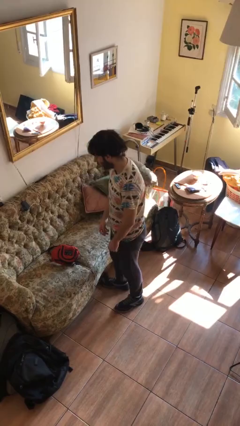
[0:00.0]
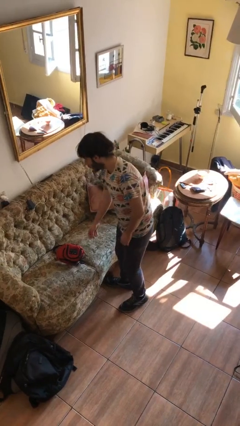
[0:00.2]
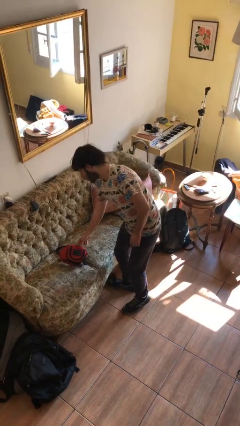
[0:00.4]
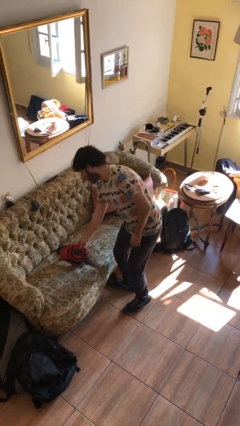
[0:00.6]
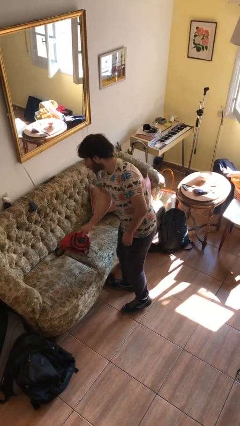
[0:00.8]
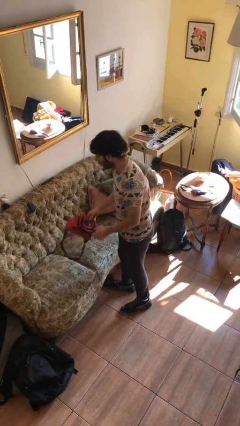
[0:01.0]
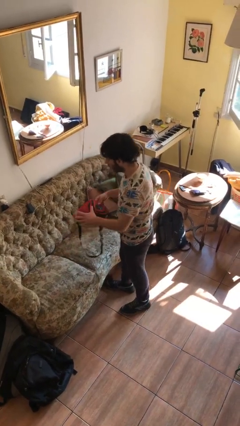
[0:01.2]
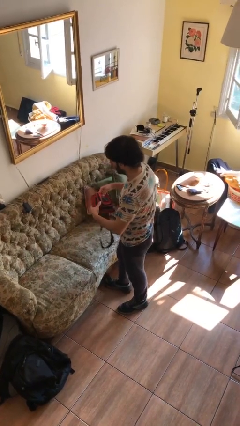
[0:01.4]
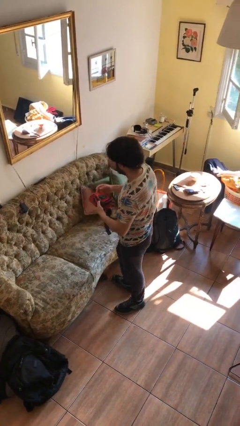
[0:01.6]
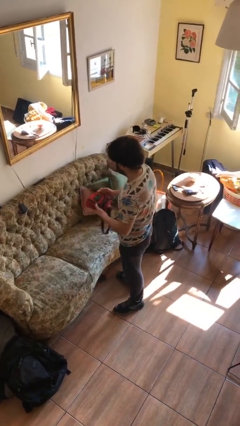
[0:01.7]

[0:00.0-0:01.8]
person picks up object from couch

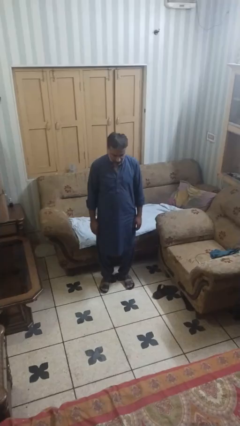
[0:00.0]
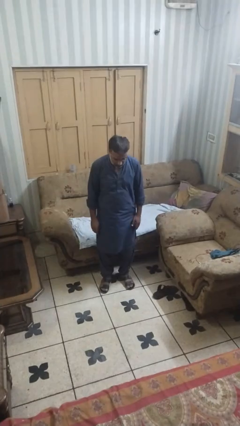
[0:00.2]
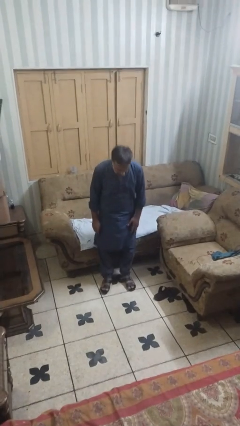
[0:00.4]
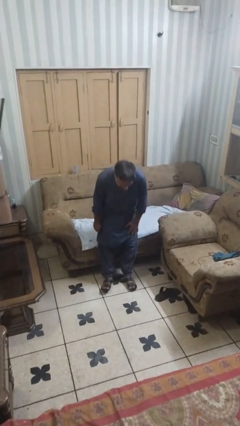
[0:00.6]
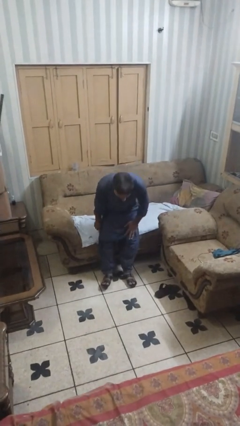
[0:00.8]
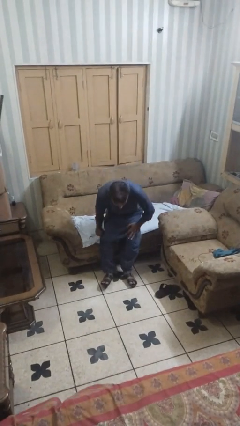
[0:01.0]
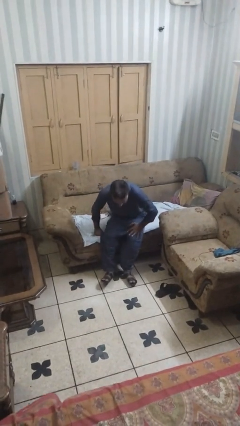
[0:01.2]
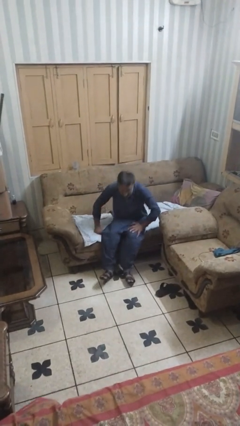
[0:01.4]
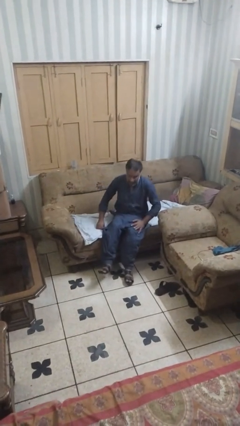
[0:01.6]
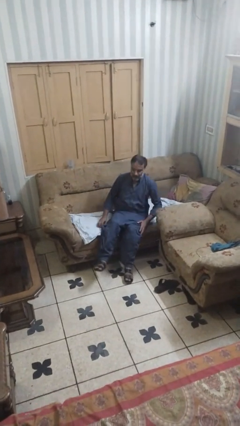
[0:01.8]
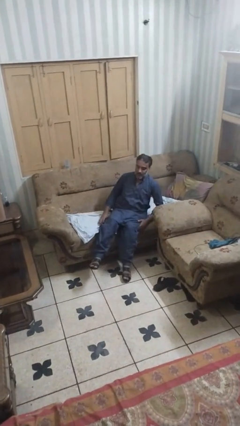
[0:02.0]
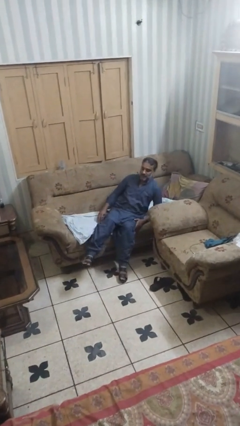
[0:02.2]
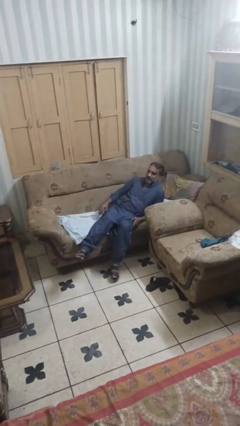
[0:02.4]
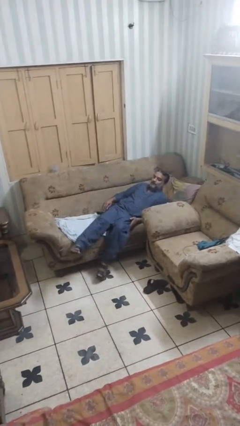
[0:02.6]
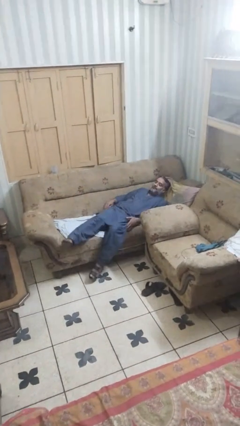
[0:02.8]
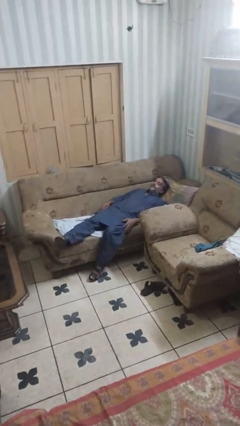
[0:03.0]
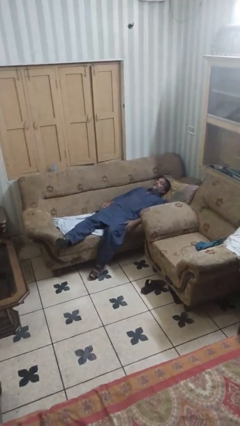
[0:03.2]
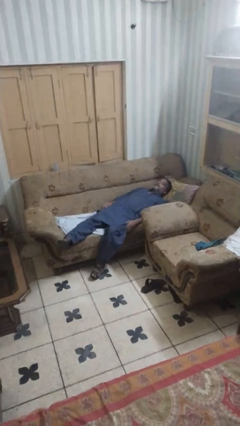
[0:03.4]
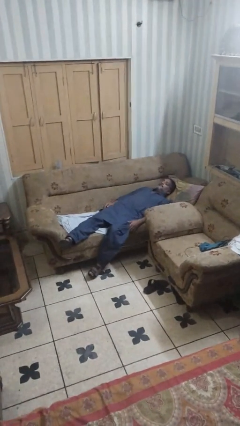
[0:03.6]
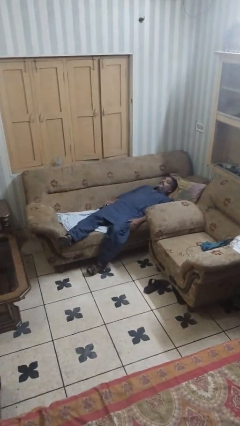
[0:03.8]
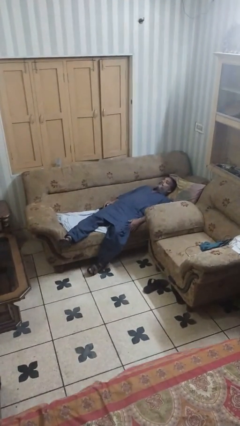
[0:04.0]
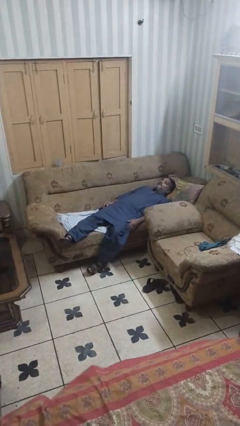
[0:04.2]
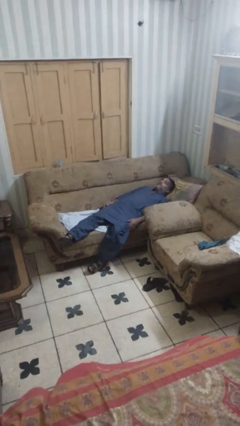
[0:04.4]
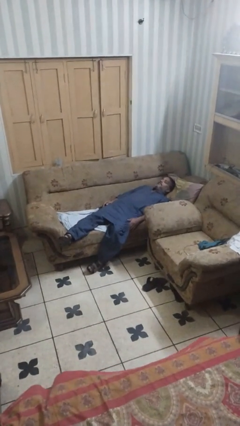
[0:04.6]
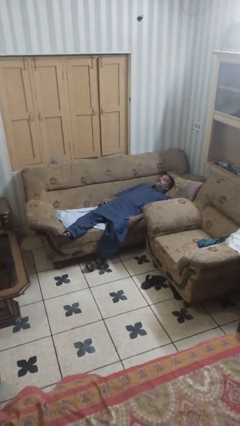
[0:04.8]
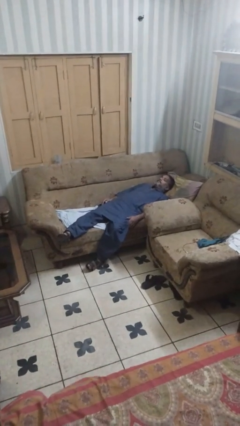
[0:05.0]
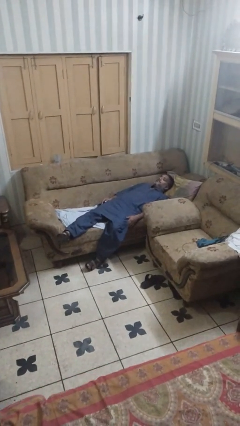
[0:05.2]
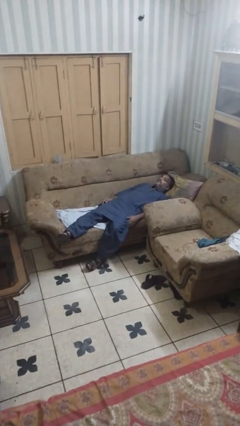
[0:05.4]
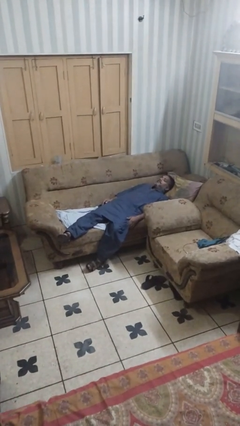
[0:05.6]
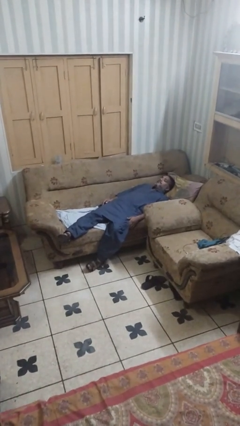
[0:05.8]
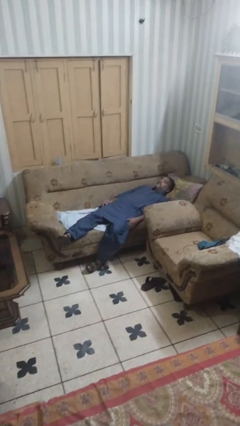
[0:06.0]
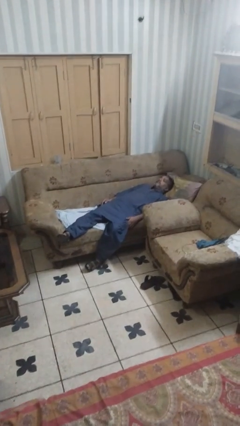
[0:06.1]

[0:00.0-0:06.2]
person lies down on couch

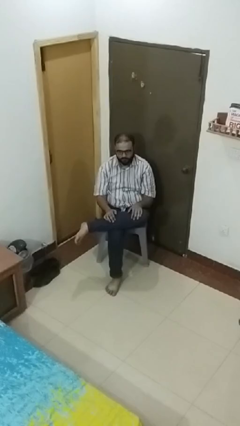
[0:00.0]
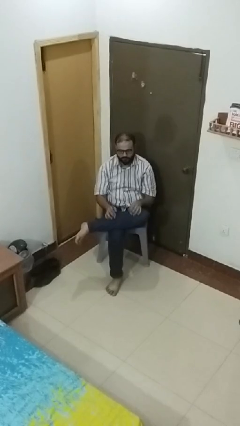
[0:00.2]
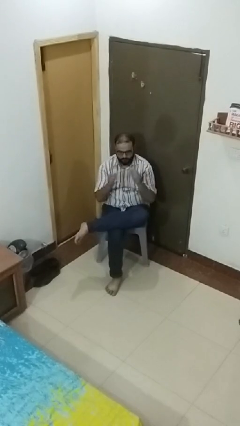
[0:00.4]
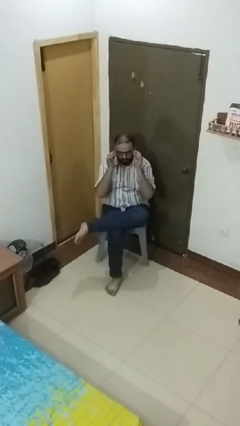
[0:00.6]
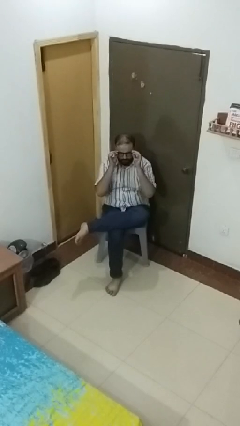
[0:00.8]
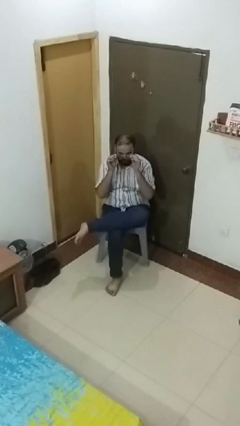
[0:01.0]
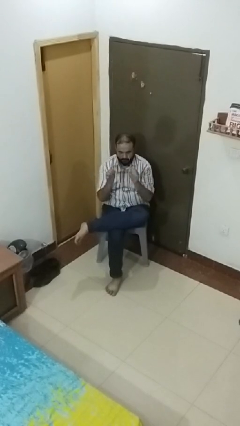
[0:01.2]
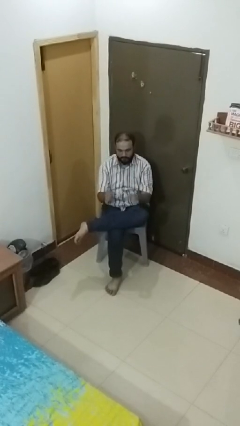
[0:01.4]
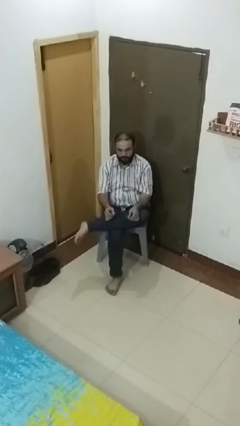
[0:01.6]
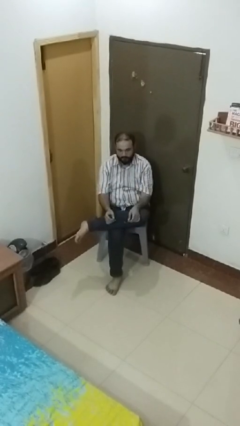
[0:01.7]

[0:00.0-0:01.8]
person takes off glasses

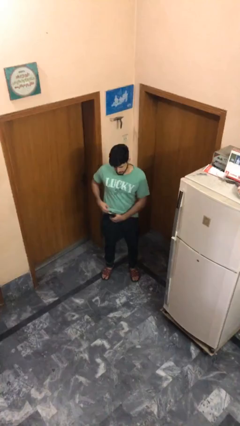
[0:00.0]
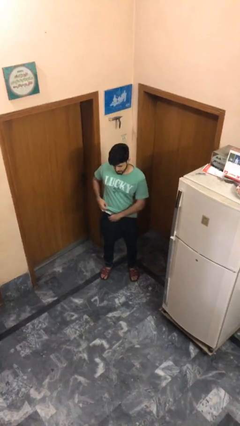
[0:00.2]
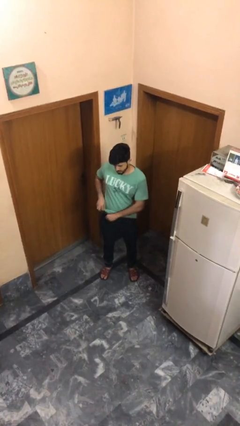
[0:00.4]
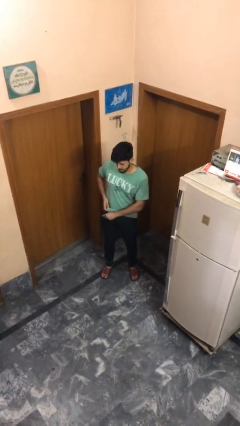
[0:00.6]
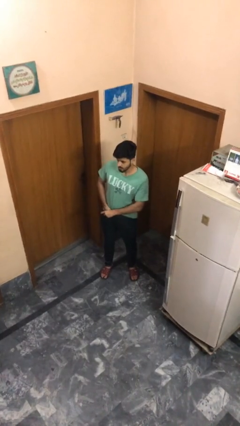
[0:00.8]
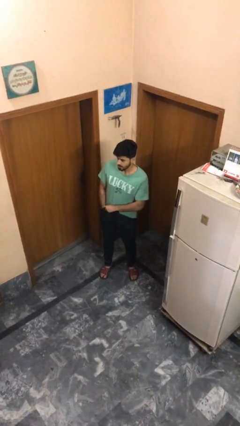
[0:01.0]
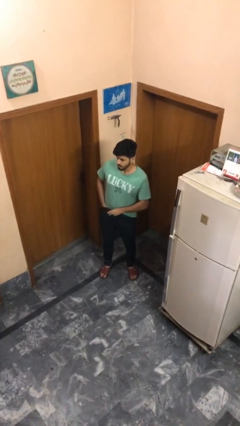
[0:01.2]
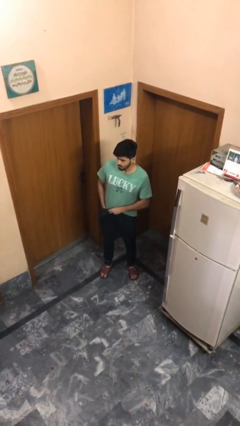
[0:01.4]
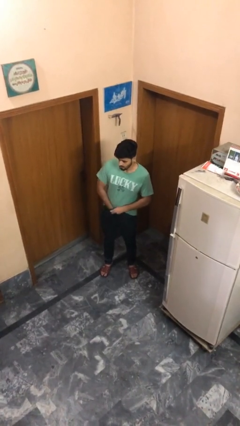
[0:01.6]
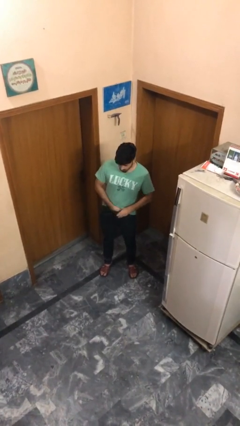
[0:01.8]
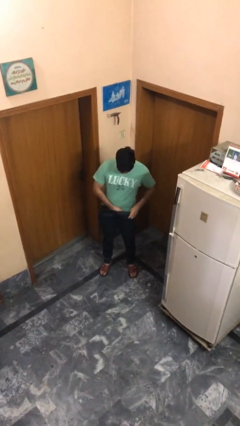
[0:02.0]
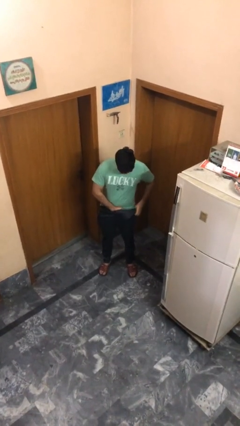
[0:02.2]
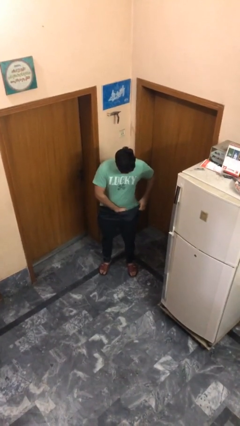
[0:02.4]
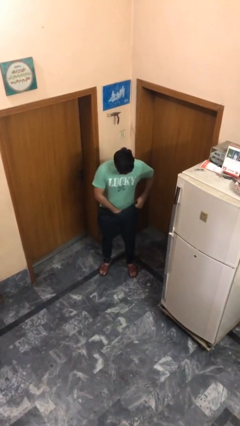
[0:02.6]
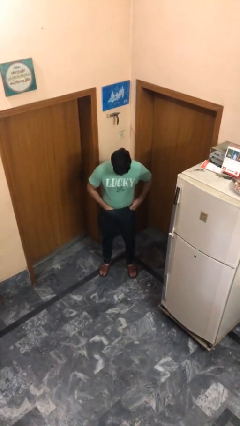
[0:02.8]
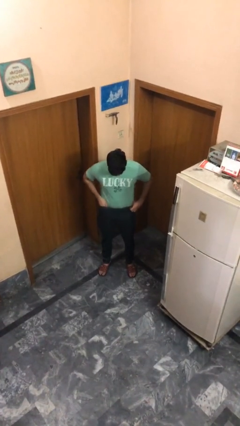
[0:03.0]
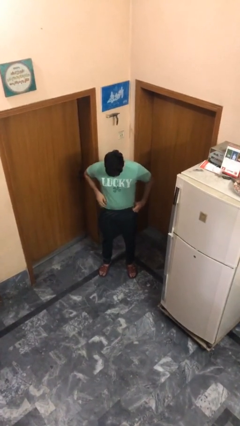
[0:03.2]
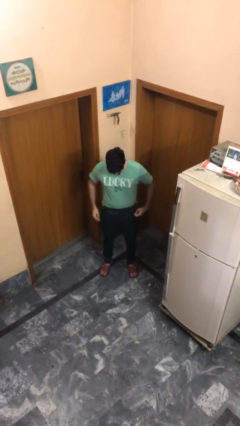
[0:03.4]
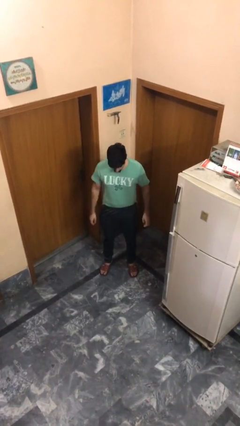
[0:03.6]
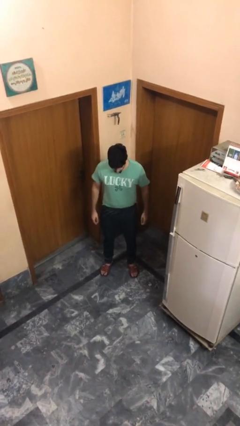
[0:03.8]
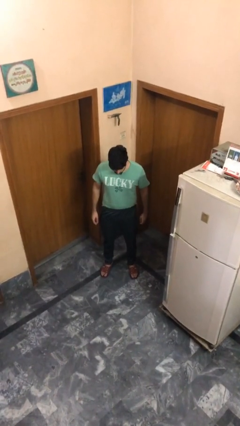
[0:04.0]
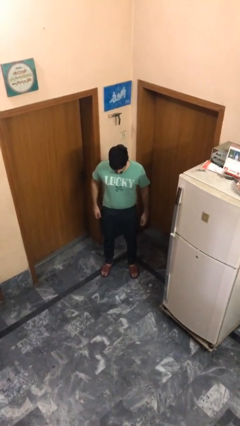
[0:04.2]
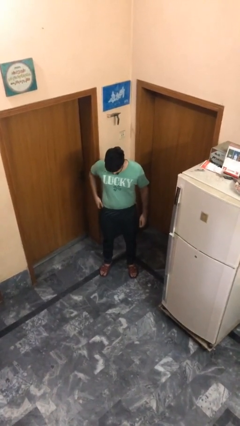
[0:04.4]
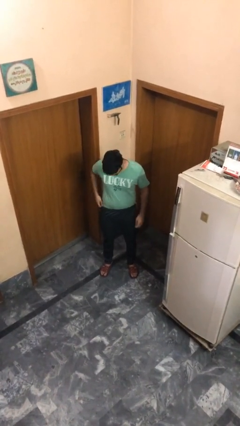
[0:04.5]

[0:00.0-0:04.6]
person tucks in shirt

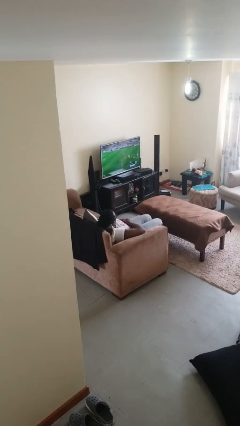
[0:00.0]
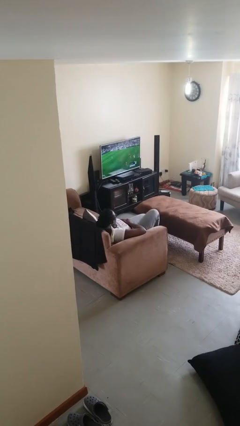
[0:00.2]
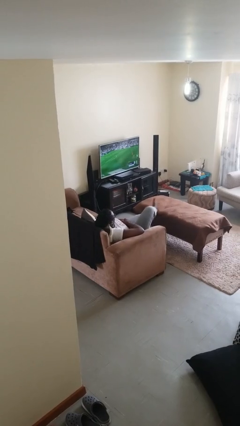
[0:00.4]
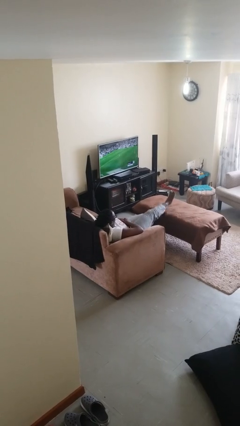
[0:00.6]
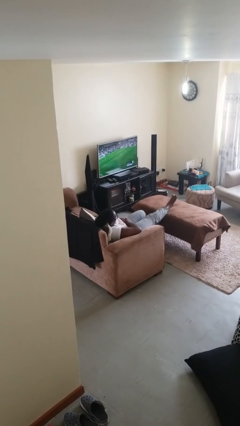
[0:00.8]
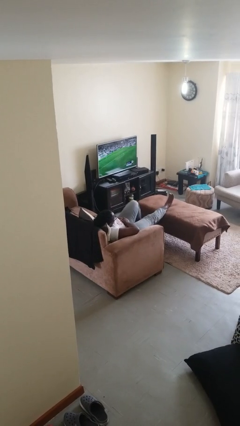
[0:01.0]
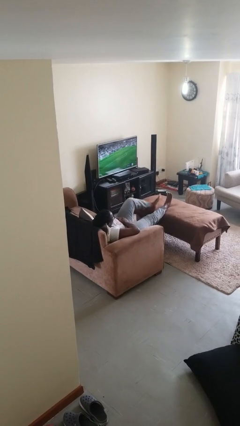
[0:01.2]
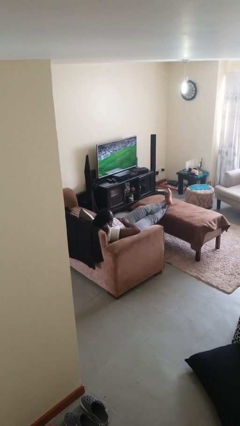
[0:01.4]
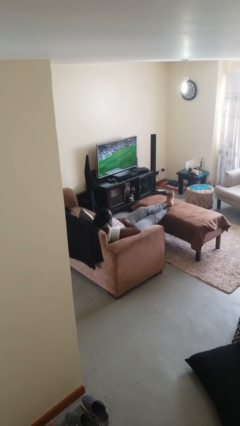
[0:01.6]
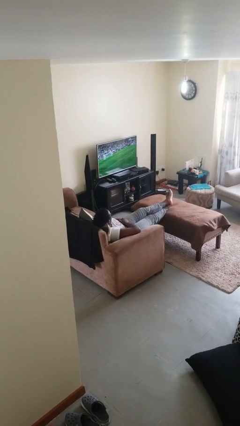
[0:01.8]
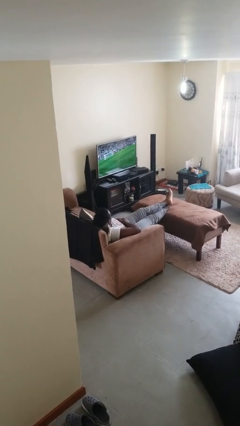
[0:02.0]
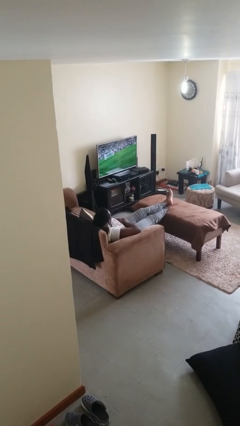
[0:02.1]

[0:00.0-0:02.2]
person puts feet up

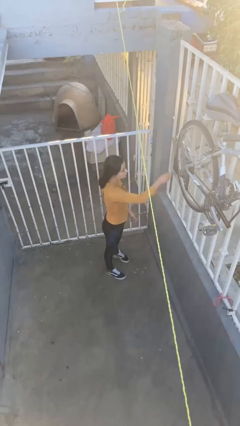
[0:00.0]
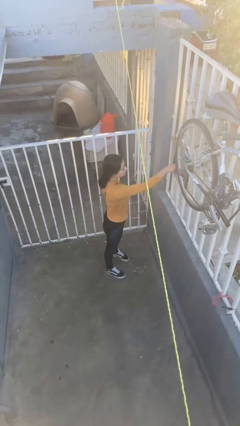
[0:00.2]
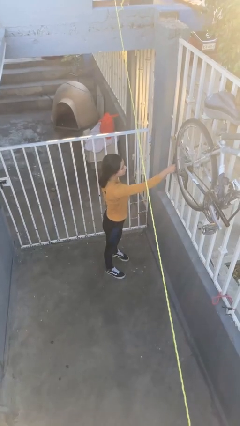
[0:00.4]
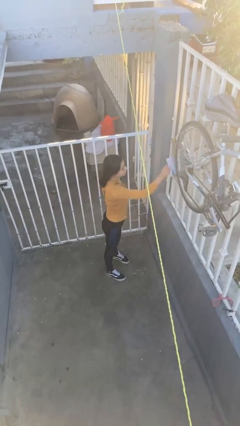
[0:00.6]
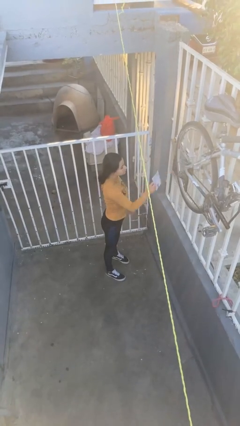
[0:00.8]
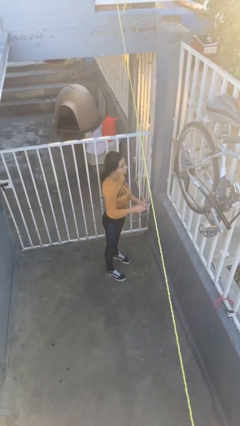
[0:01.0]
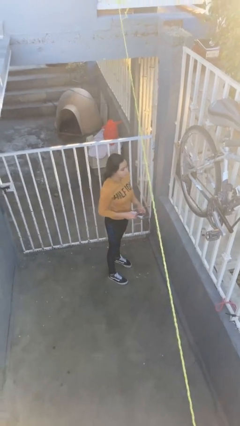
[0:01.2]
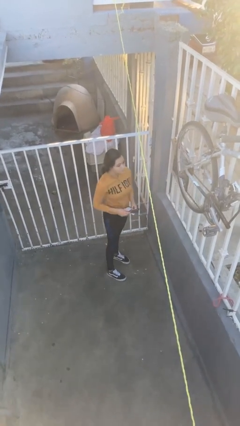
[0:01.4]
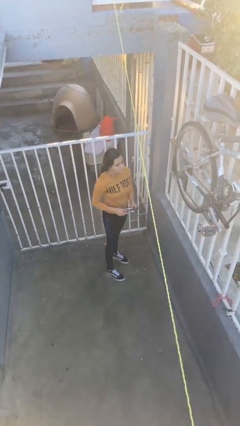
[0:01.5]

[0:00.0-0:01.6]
person takes letters from mailbox
